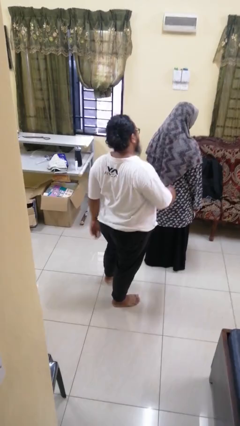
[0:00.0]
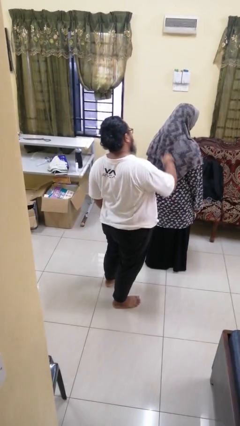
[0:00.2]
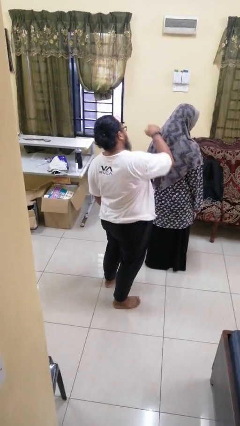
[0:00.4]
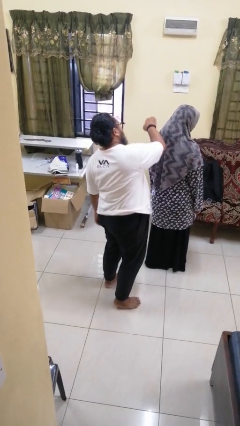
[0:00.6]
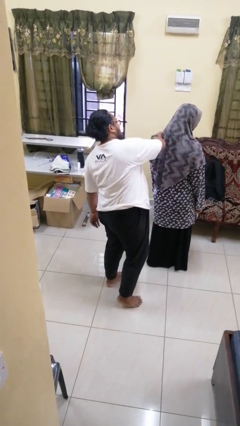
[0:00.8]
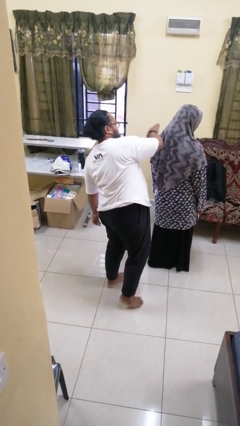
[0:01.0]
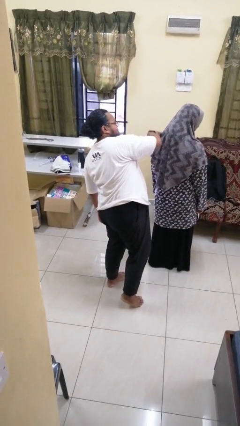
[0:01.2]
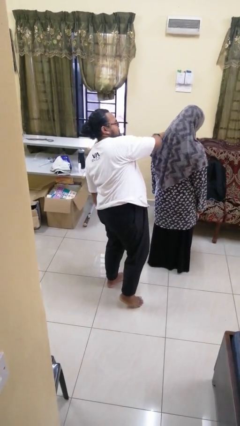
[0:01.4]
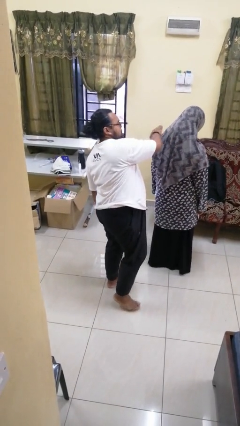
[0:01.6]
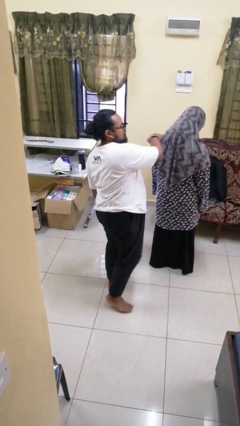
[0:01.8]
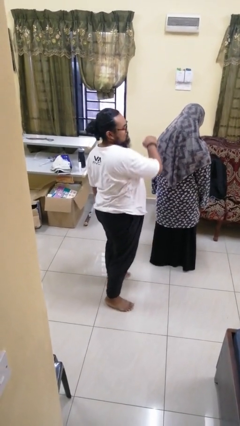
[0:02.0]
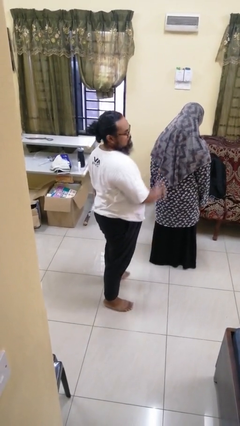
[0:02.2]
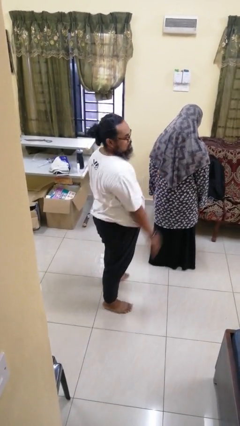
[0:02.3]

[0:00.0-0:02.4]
person touches back of person

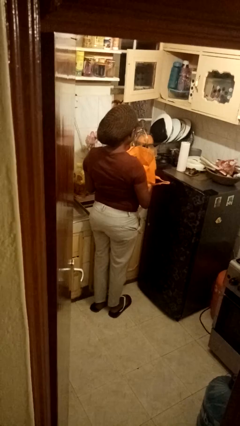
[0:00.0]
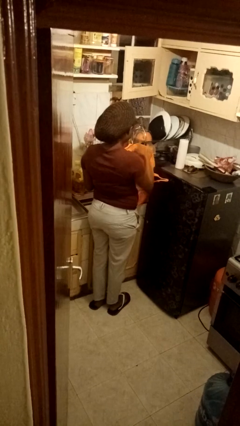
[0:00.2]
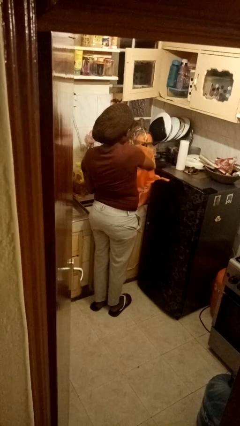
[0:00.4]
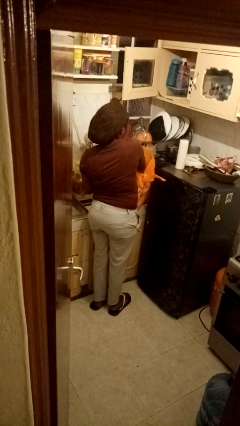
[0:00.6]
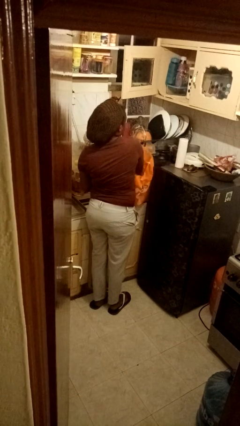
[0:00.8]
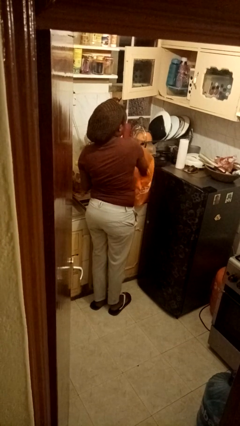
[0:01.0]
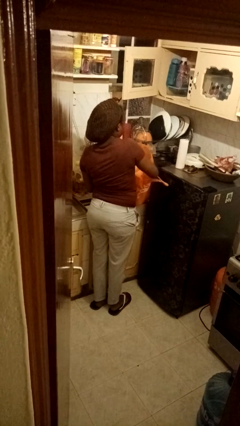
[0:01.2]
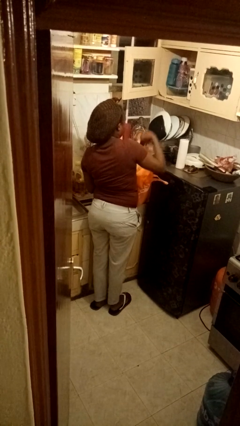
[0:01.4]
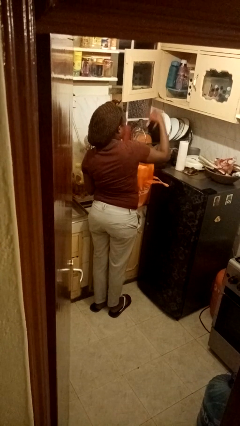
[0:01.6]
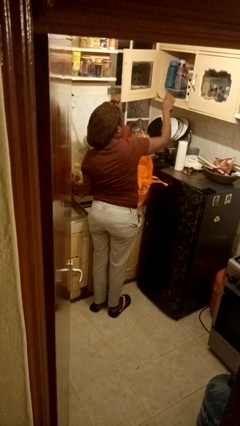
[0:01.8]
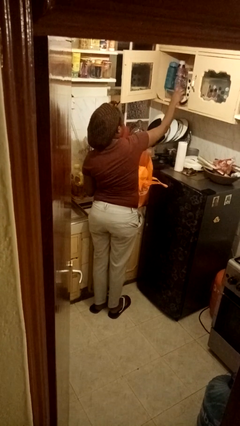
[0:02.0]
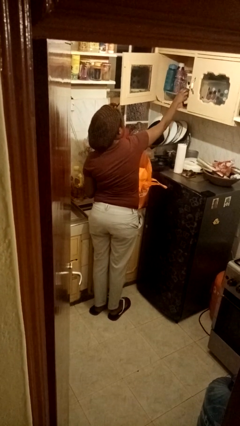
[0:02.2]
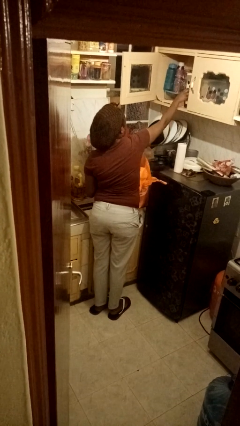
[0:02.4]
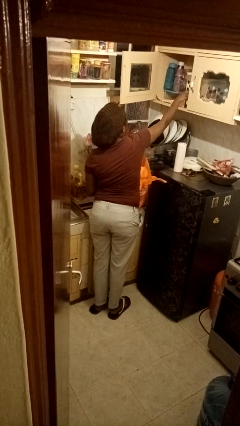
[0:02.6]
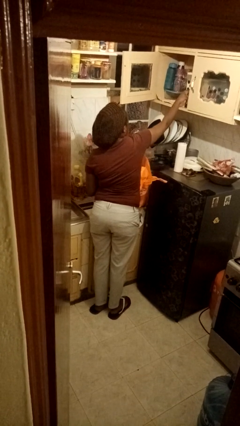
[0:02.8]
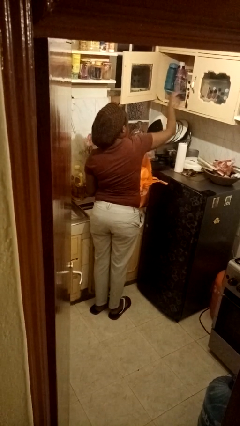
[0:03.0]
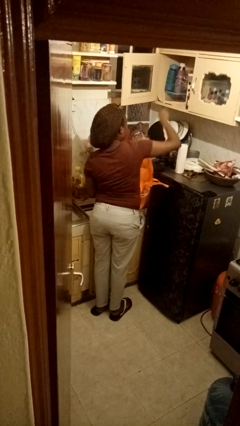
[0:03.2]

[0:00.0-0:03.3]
person loads groceries into cabinet

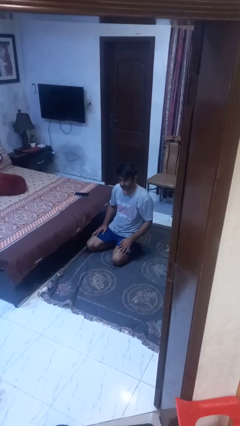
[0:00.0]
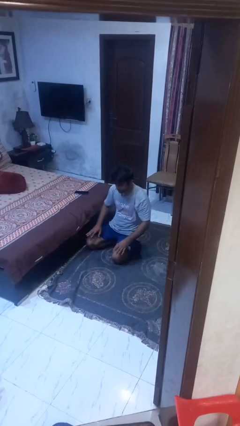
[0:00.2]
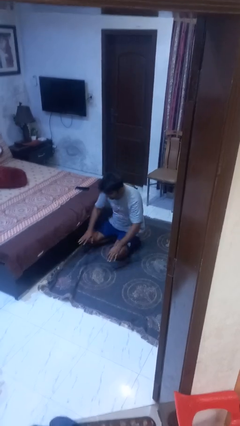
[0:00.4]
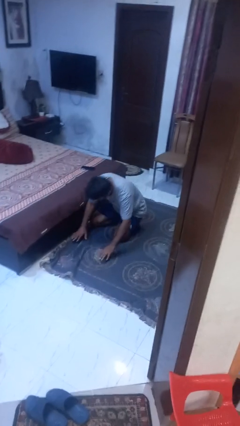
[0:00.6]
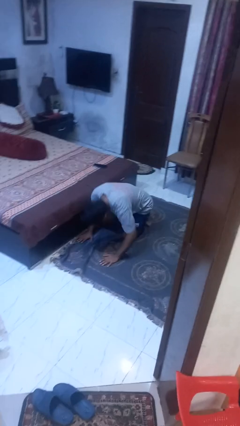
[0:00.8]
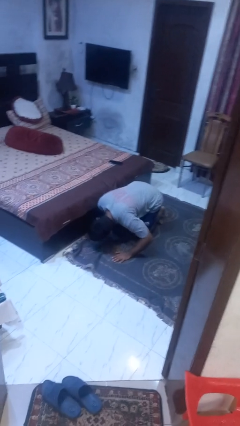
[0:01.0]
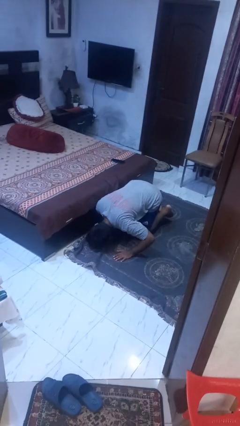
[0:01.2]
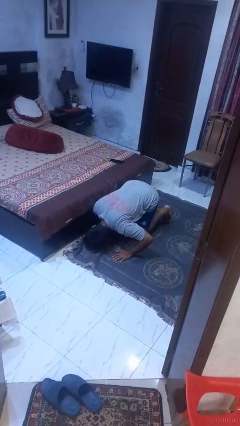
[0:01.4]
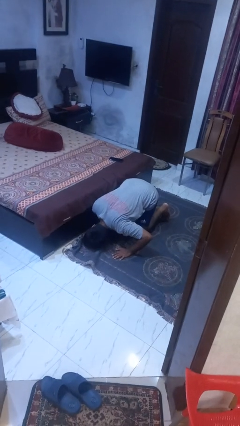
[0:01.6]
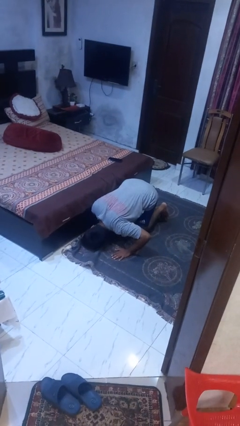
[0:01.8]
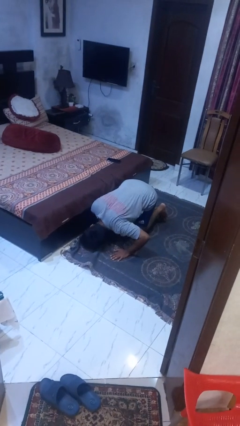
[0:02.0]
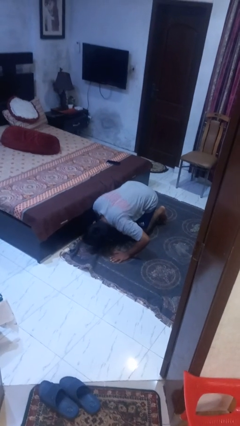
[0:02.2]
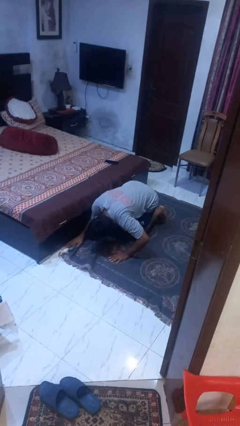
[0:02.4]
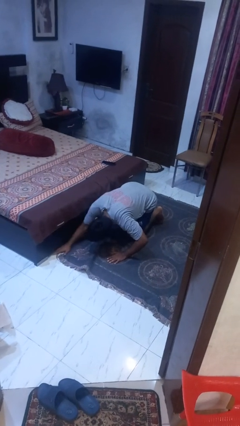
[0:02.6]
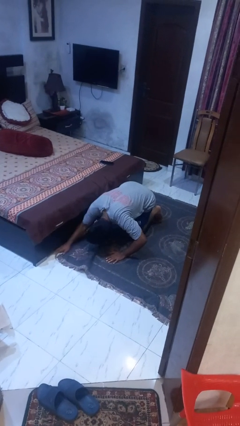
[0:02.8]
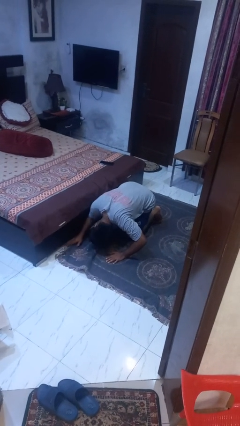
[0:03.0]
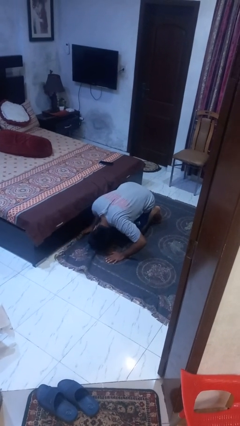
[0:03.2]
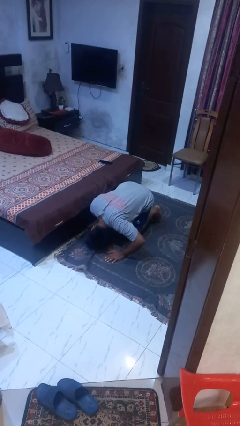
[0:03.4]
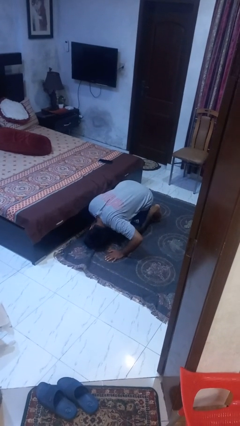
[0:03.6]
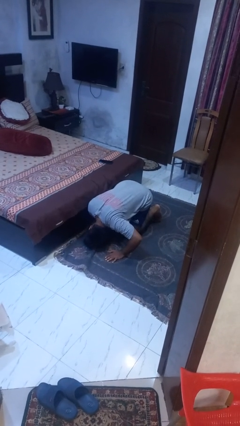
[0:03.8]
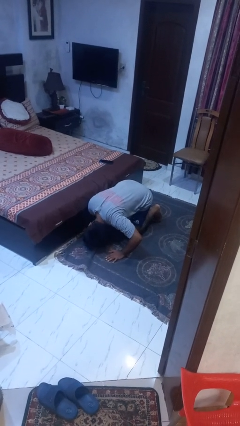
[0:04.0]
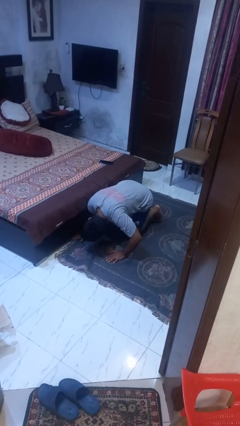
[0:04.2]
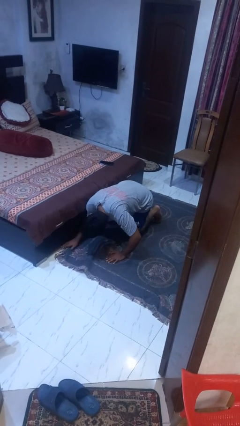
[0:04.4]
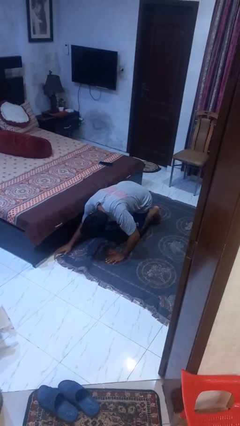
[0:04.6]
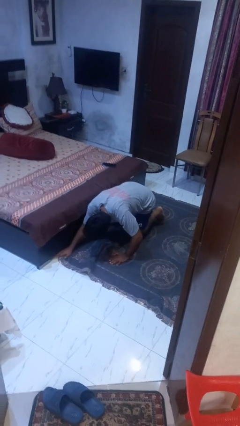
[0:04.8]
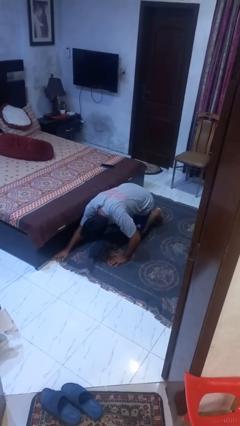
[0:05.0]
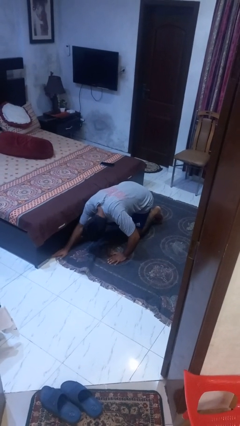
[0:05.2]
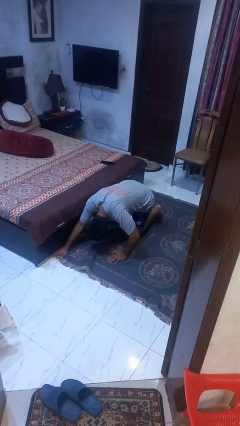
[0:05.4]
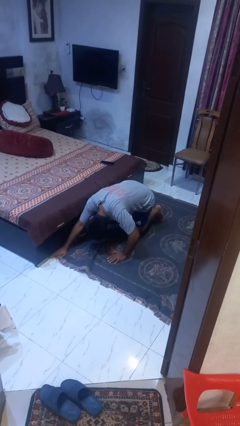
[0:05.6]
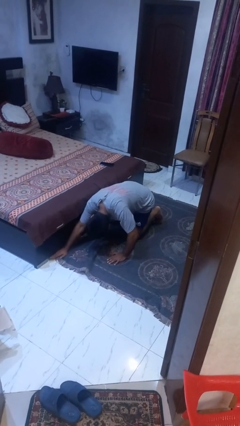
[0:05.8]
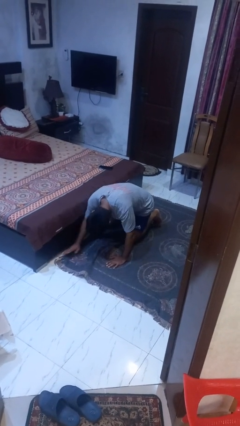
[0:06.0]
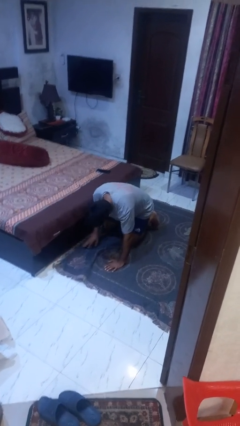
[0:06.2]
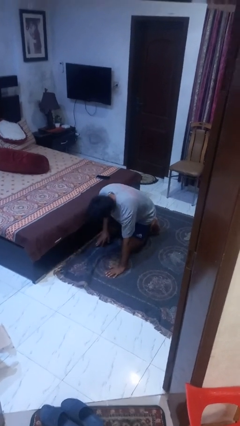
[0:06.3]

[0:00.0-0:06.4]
person searches under bed

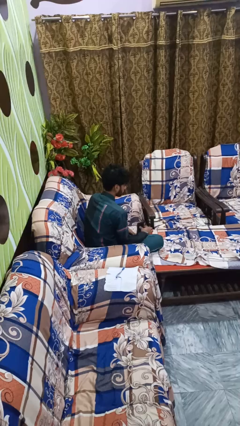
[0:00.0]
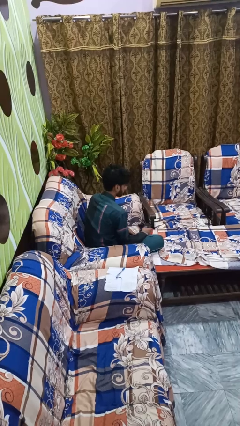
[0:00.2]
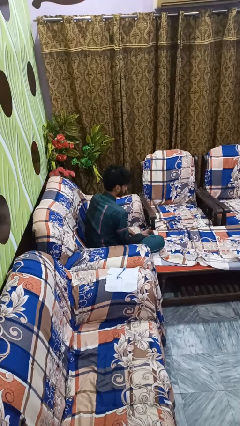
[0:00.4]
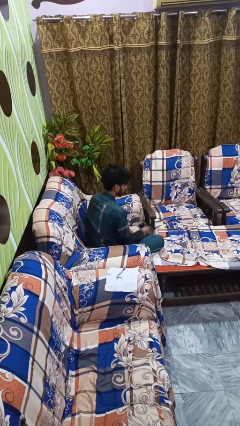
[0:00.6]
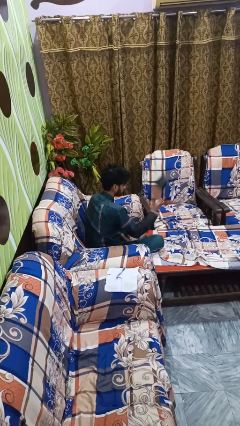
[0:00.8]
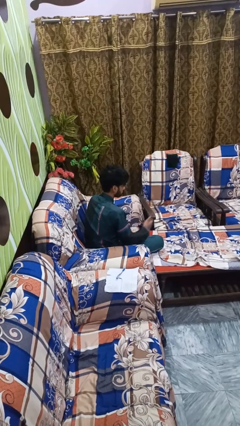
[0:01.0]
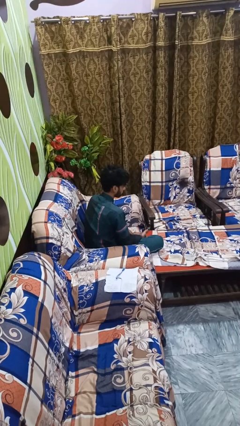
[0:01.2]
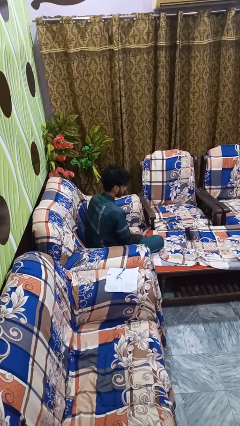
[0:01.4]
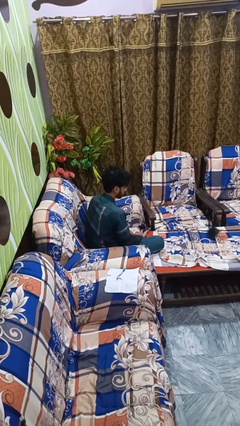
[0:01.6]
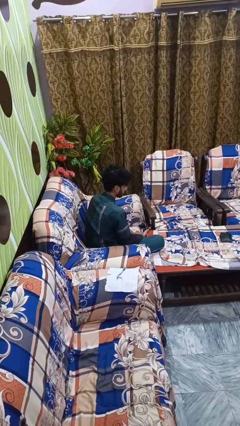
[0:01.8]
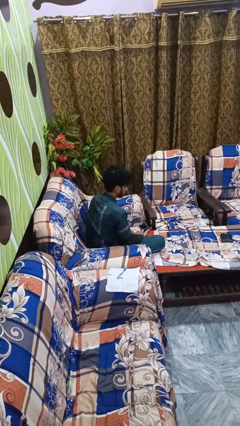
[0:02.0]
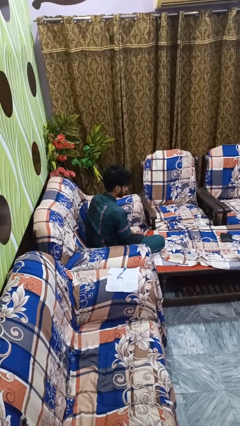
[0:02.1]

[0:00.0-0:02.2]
person throws object into air

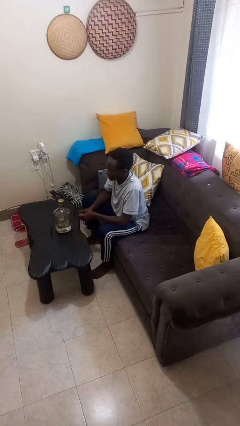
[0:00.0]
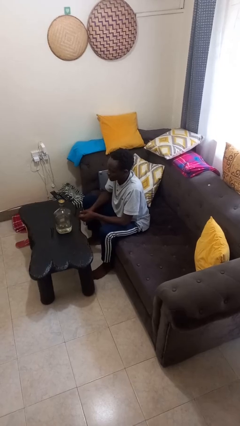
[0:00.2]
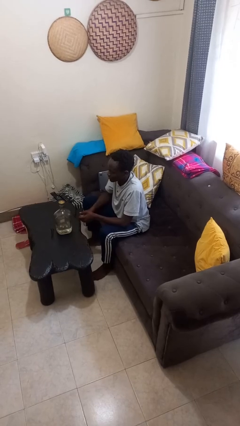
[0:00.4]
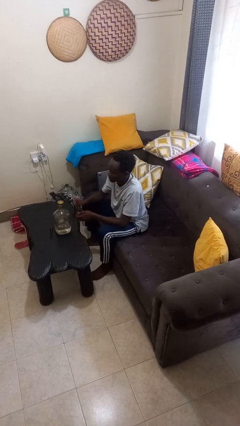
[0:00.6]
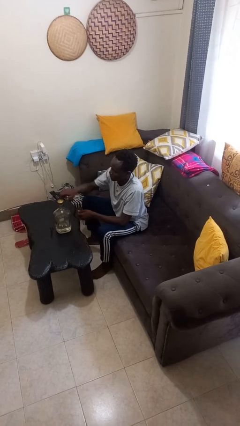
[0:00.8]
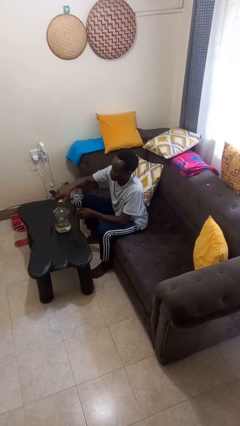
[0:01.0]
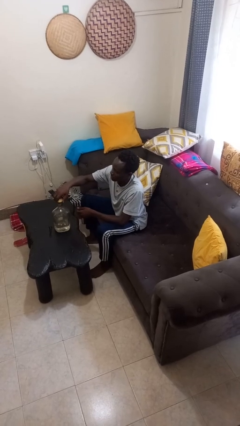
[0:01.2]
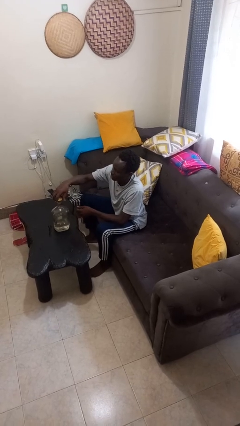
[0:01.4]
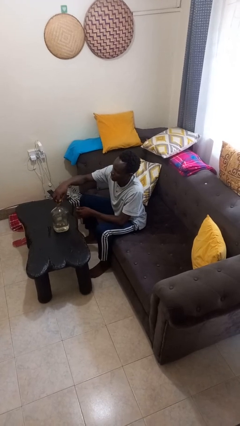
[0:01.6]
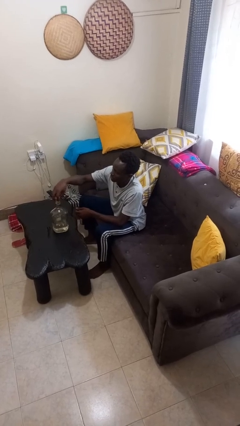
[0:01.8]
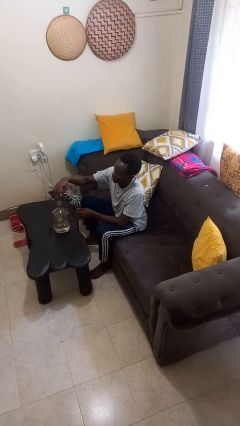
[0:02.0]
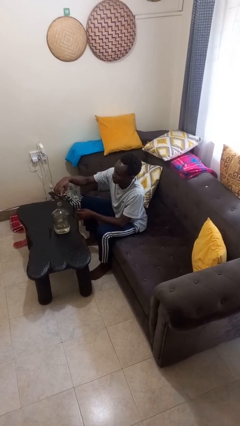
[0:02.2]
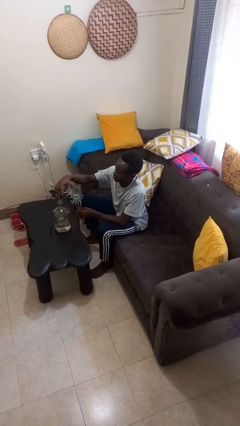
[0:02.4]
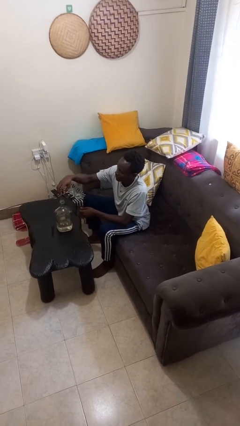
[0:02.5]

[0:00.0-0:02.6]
person unscrews lid from bottle

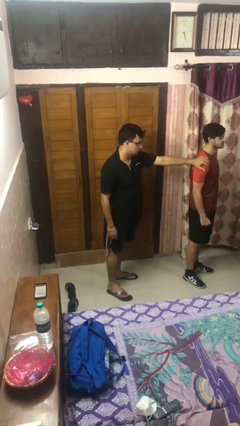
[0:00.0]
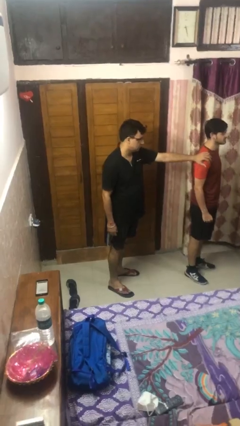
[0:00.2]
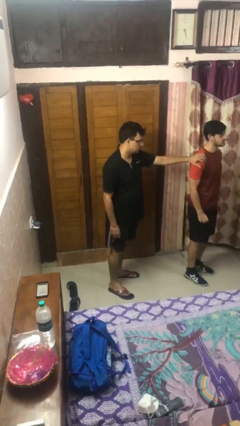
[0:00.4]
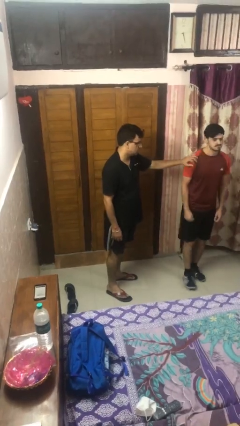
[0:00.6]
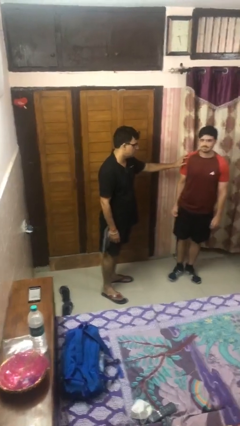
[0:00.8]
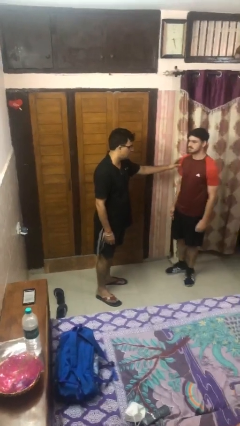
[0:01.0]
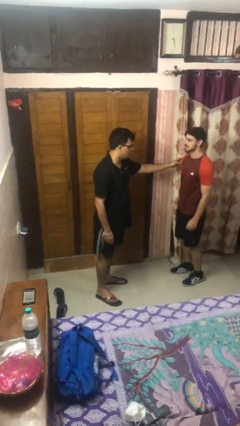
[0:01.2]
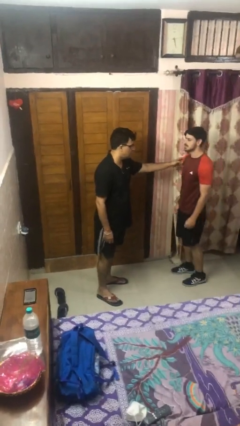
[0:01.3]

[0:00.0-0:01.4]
person spins person around
